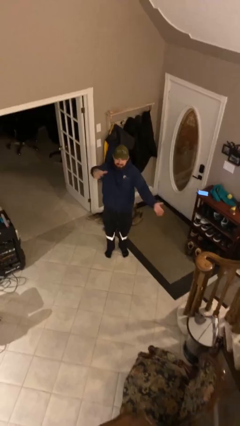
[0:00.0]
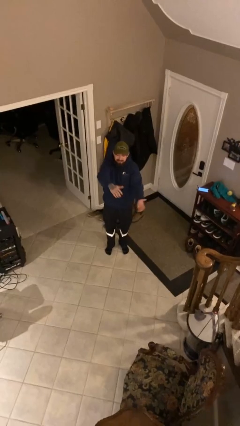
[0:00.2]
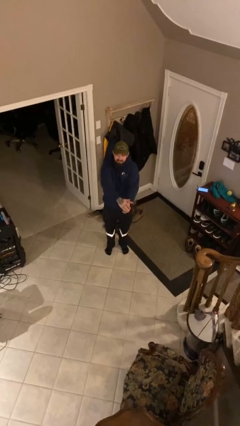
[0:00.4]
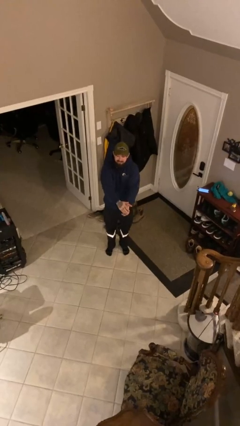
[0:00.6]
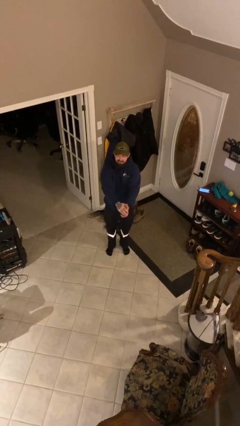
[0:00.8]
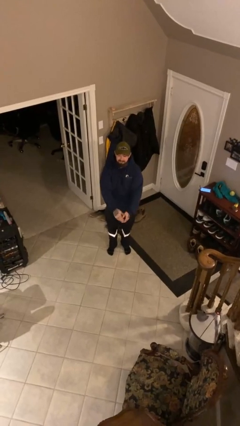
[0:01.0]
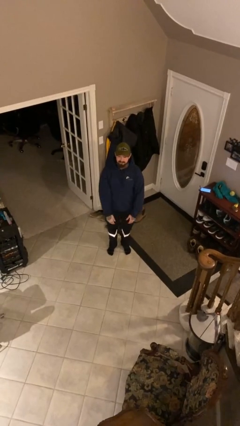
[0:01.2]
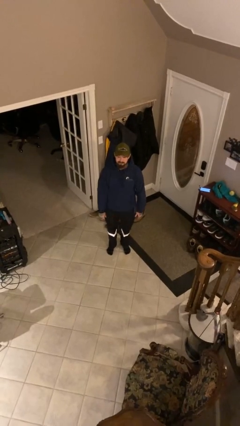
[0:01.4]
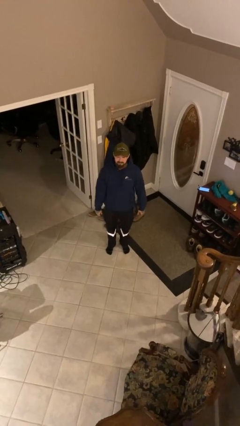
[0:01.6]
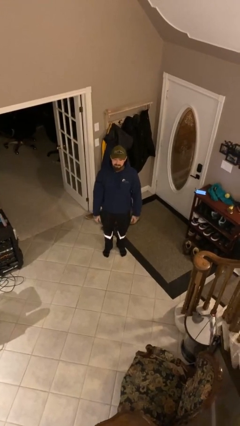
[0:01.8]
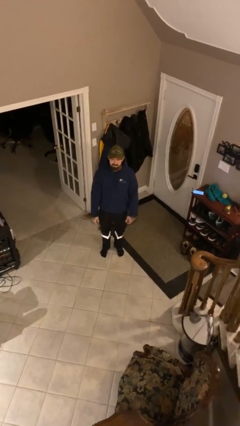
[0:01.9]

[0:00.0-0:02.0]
person gestures zoom out

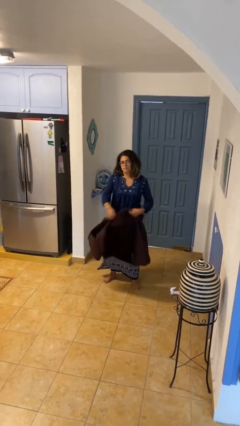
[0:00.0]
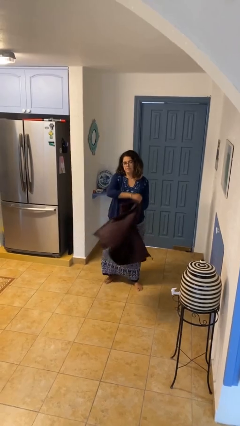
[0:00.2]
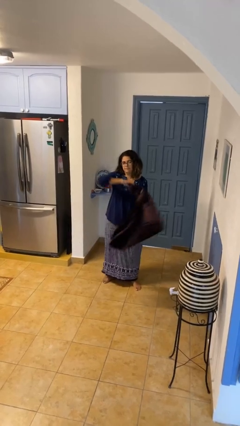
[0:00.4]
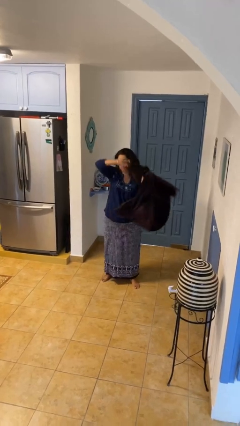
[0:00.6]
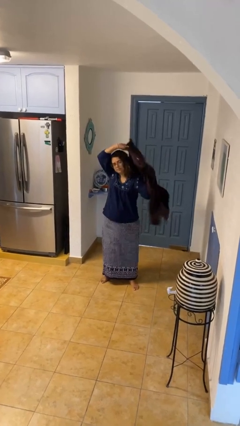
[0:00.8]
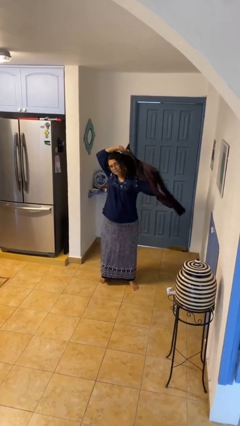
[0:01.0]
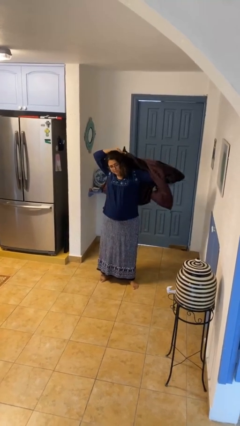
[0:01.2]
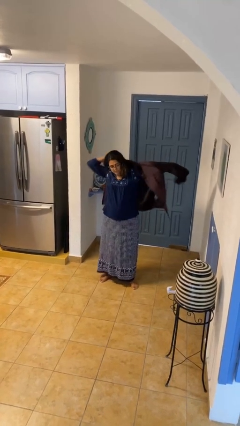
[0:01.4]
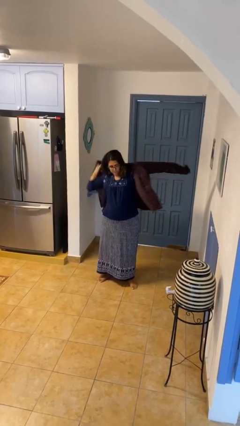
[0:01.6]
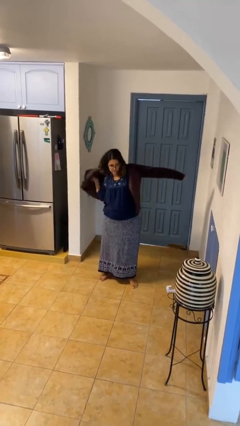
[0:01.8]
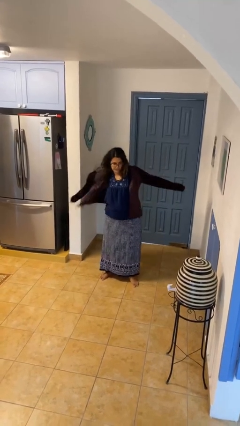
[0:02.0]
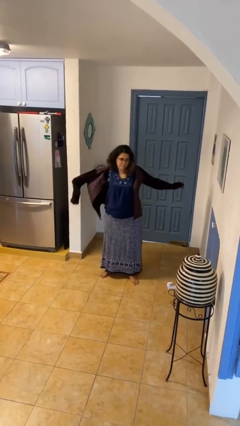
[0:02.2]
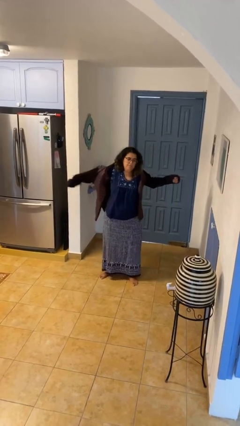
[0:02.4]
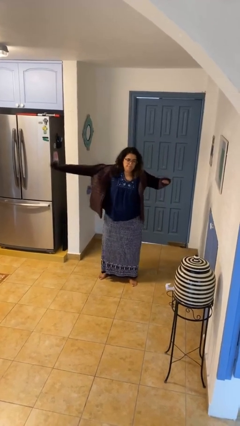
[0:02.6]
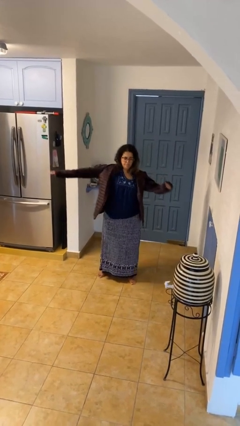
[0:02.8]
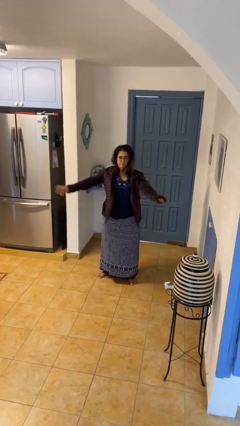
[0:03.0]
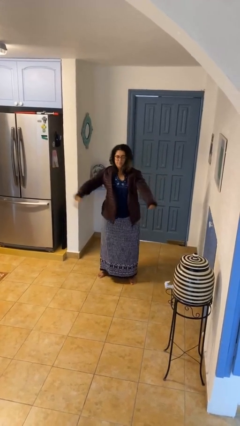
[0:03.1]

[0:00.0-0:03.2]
person puts on jacket

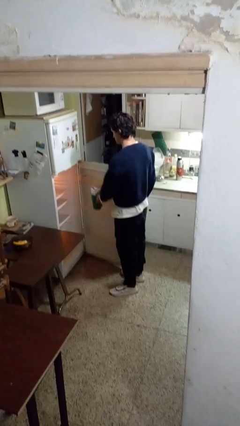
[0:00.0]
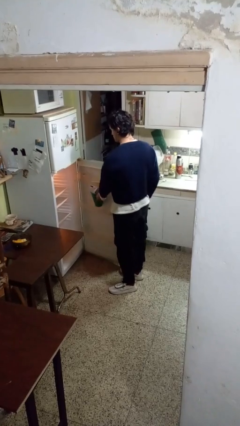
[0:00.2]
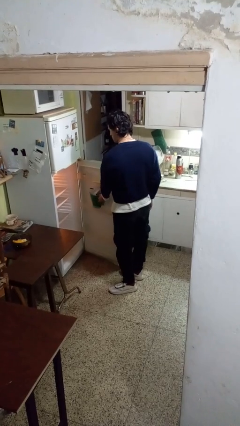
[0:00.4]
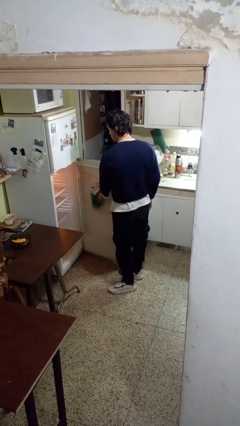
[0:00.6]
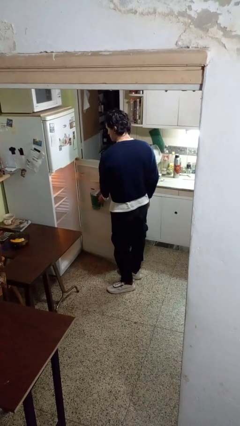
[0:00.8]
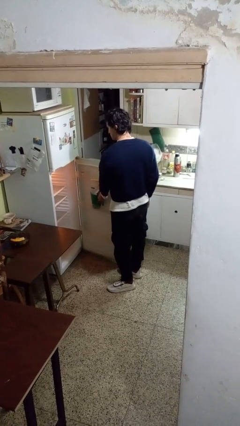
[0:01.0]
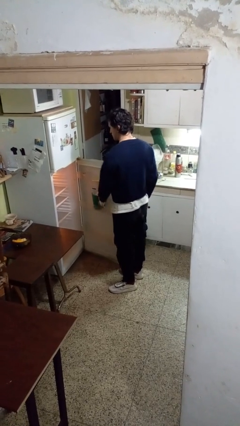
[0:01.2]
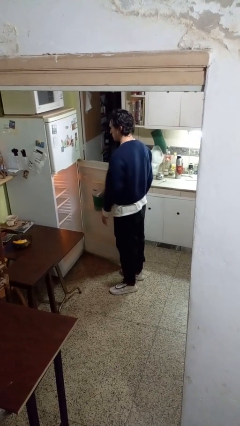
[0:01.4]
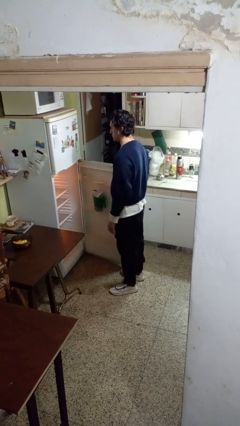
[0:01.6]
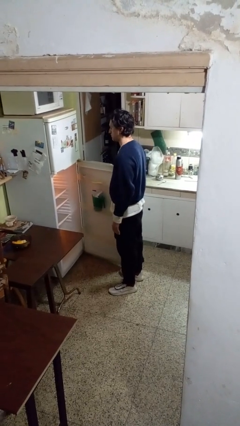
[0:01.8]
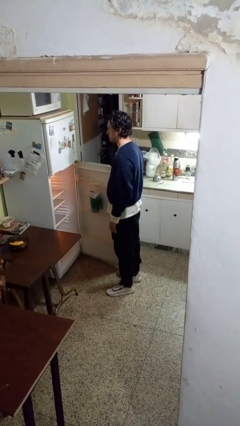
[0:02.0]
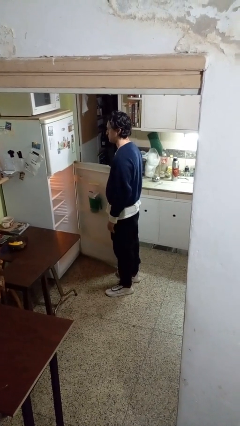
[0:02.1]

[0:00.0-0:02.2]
person puts object into refrigerator

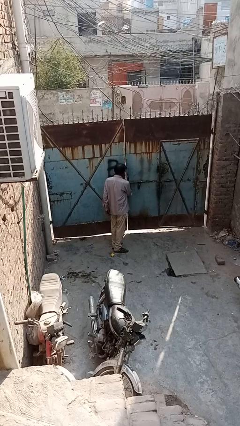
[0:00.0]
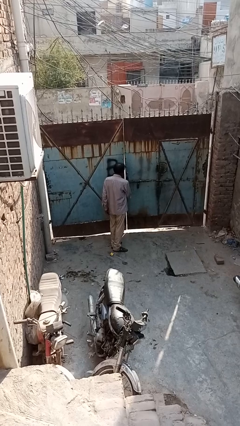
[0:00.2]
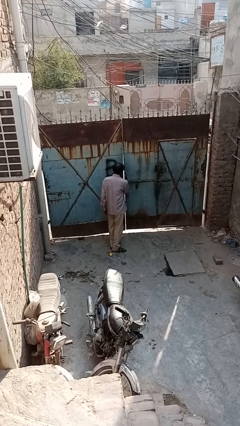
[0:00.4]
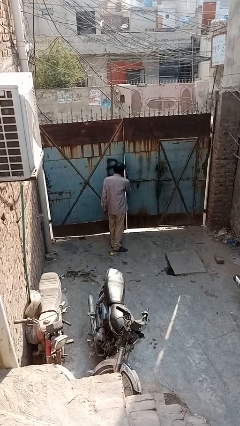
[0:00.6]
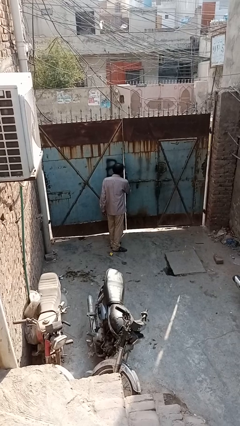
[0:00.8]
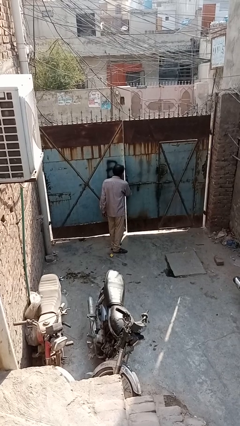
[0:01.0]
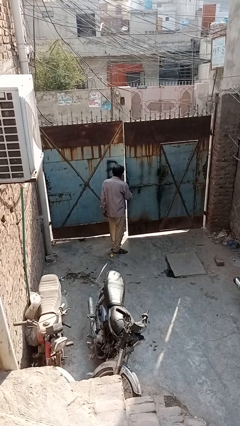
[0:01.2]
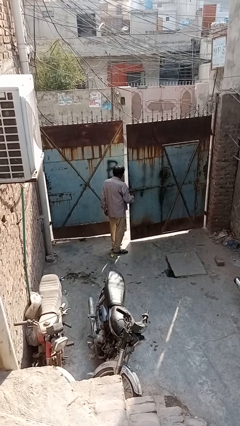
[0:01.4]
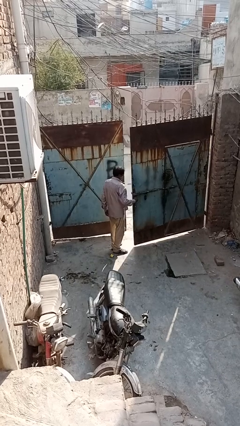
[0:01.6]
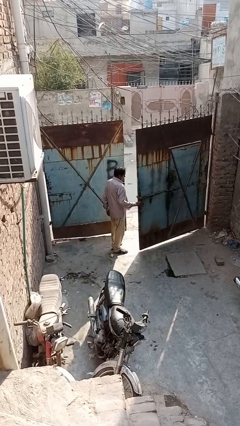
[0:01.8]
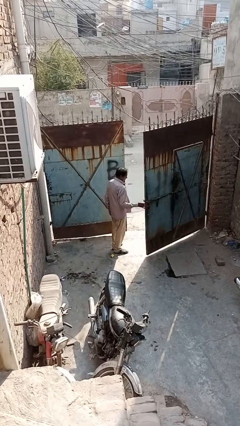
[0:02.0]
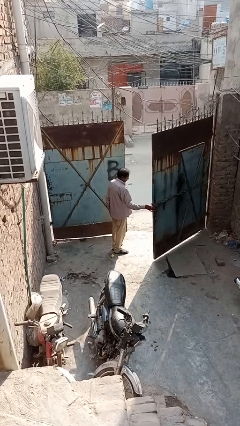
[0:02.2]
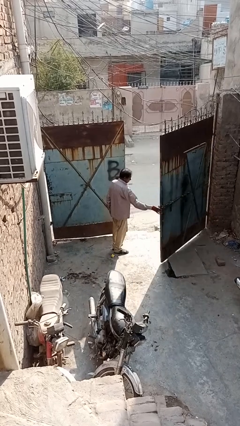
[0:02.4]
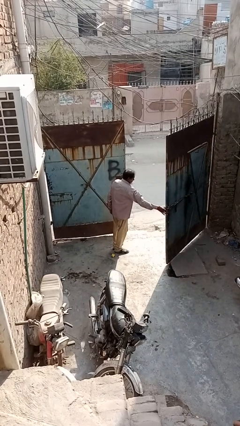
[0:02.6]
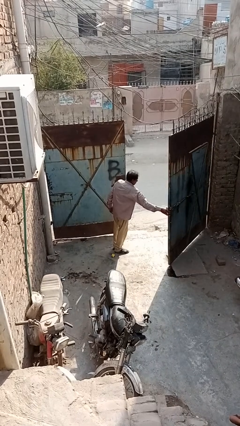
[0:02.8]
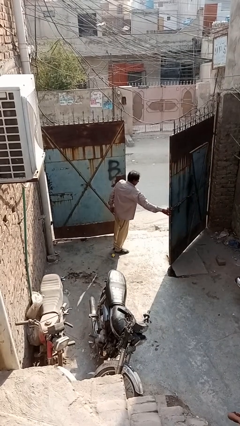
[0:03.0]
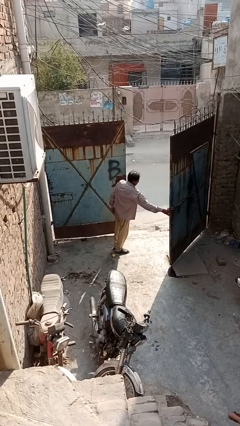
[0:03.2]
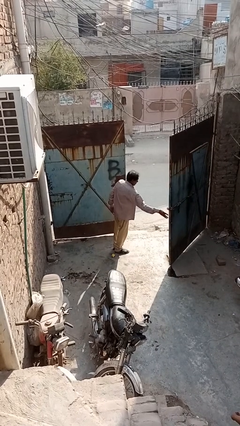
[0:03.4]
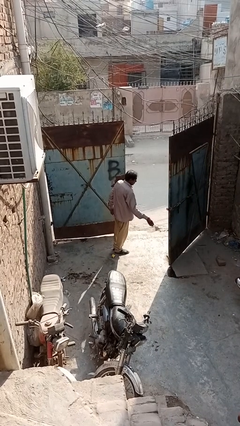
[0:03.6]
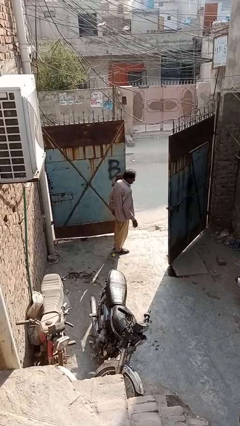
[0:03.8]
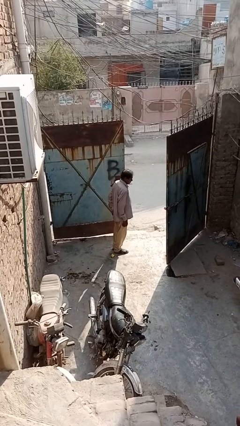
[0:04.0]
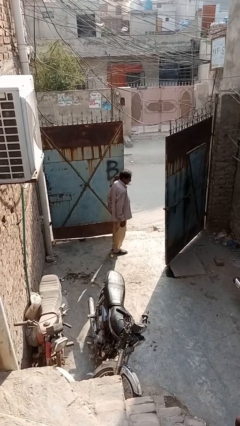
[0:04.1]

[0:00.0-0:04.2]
person opens gate

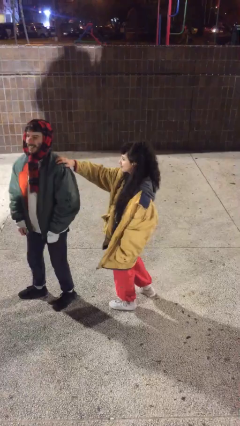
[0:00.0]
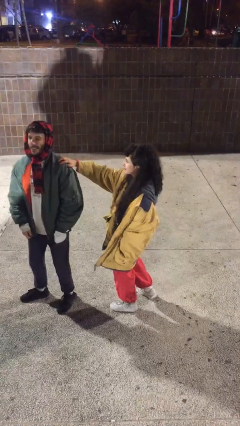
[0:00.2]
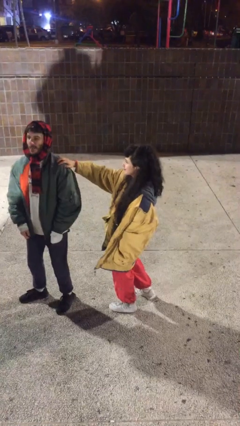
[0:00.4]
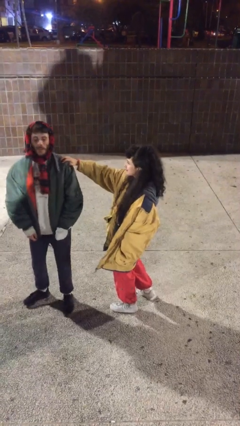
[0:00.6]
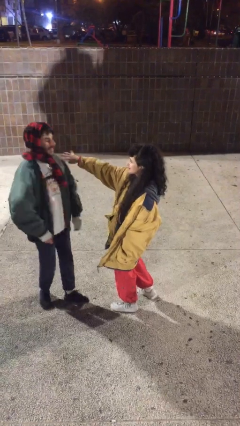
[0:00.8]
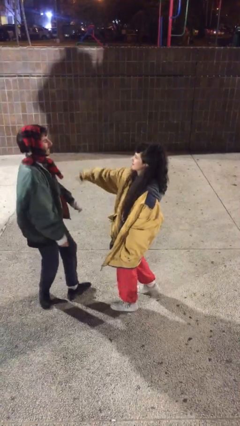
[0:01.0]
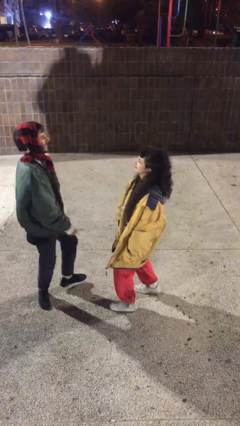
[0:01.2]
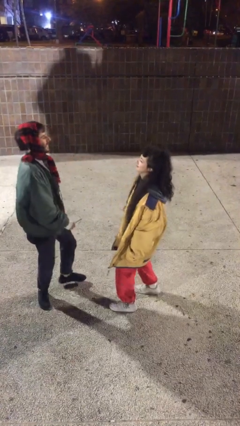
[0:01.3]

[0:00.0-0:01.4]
person spins person around

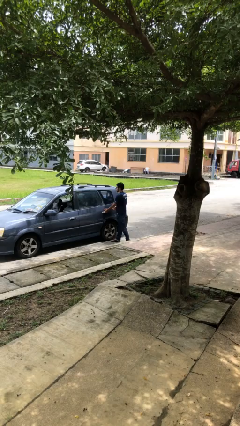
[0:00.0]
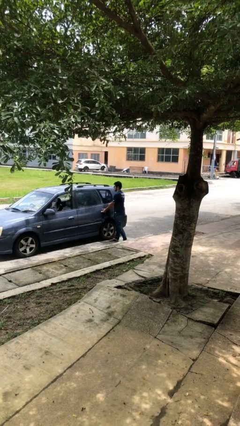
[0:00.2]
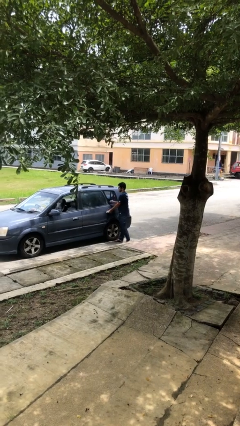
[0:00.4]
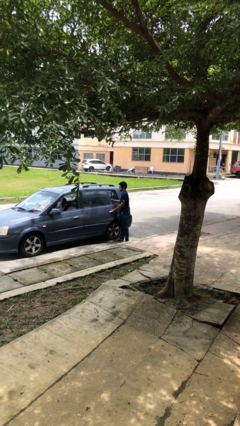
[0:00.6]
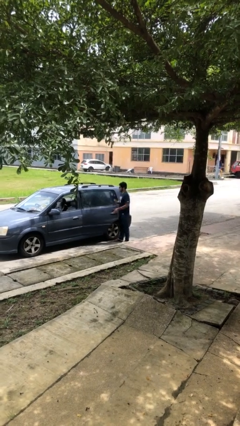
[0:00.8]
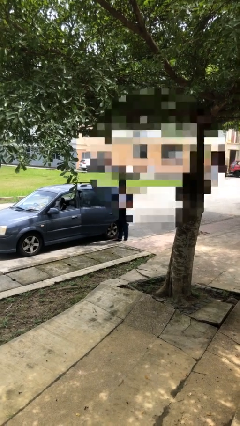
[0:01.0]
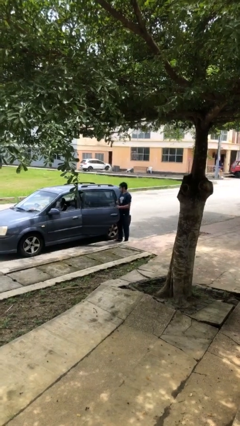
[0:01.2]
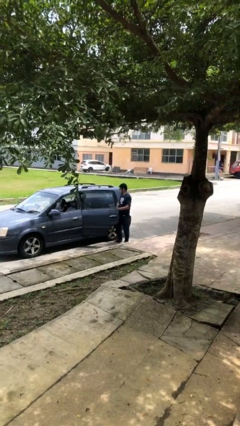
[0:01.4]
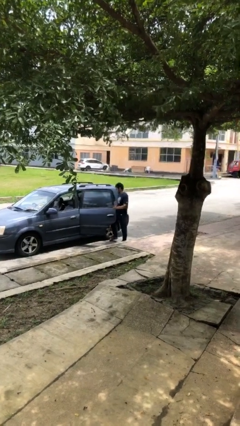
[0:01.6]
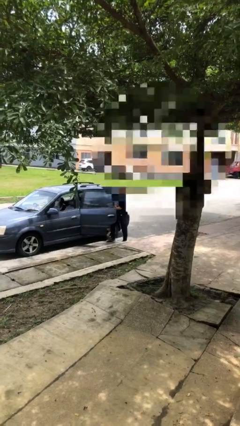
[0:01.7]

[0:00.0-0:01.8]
person opens car door

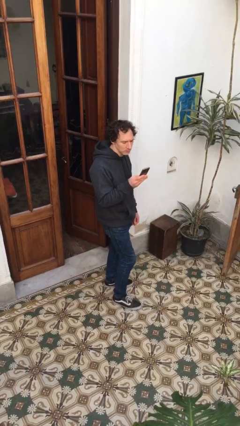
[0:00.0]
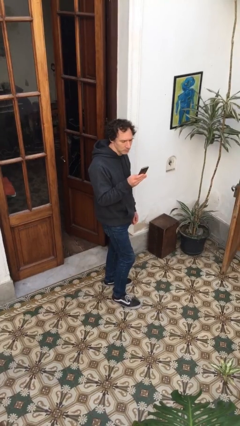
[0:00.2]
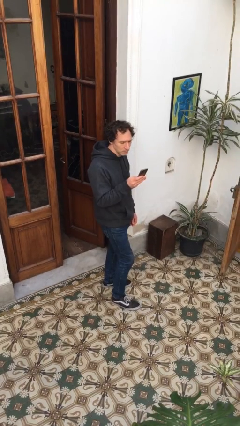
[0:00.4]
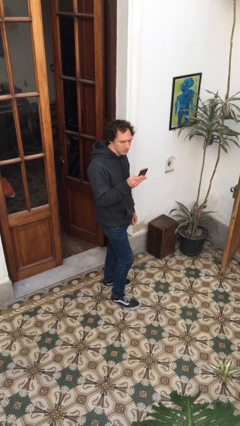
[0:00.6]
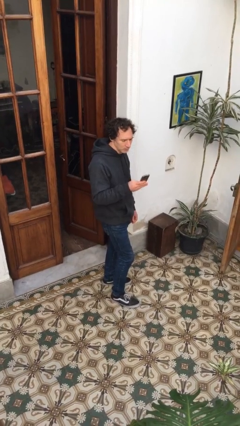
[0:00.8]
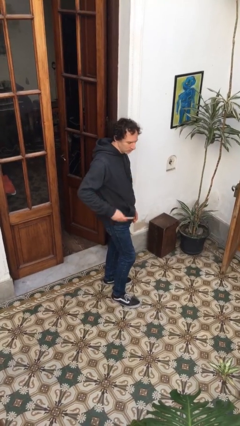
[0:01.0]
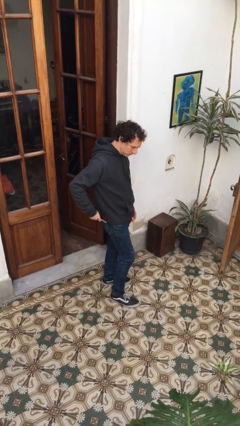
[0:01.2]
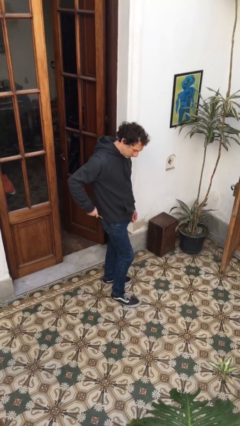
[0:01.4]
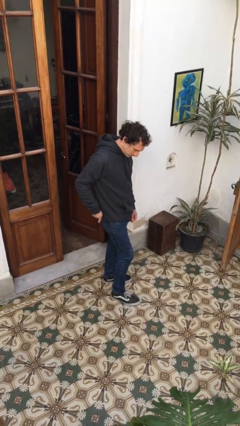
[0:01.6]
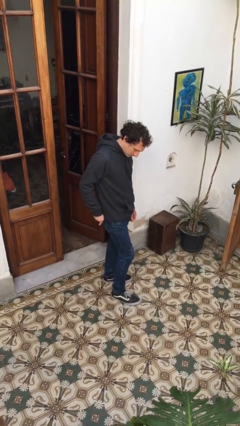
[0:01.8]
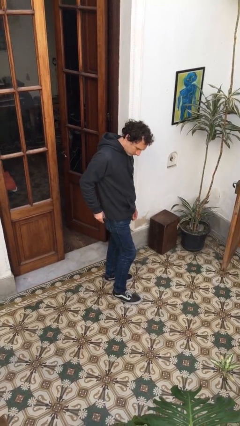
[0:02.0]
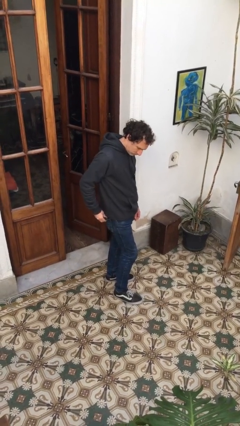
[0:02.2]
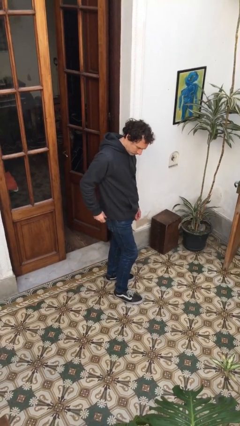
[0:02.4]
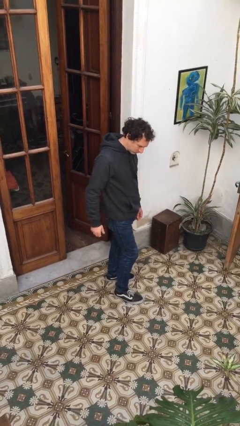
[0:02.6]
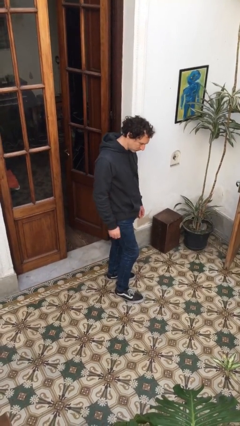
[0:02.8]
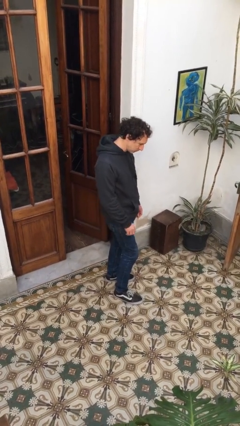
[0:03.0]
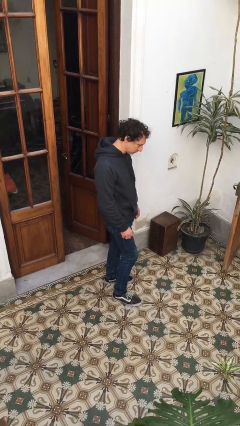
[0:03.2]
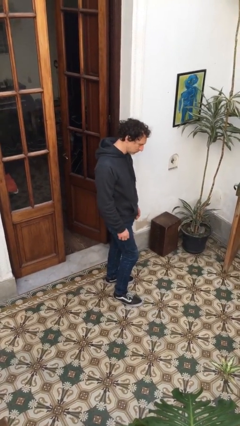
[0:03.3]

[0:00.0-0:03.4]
person puts phone into pocket
